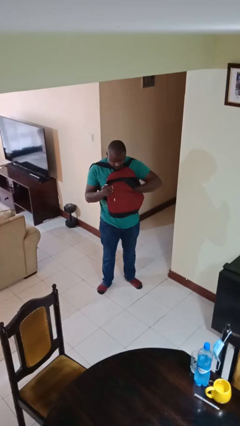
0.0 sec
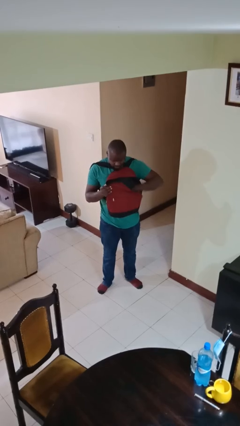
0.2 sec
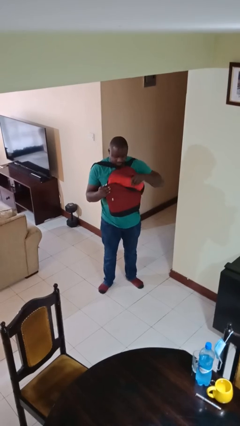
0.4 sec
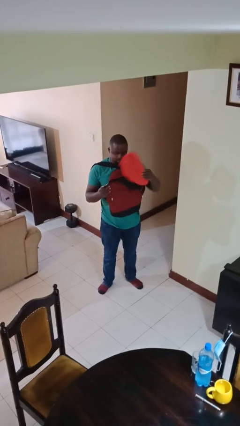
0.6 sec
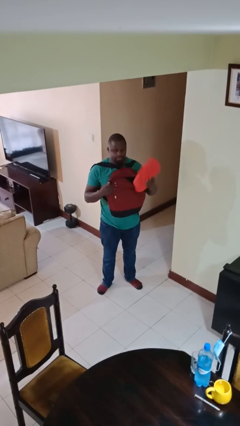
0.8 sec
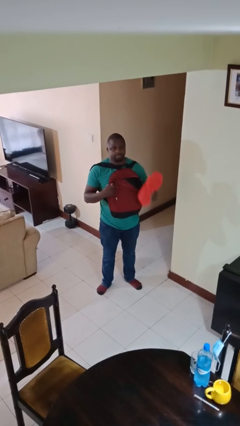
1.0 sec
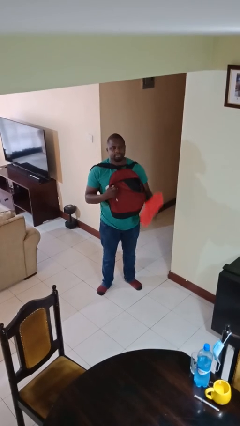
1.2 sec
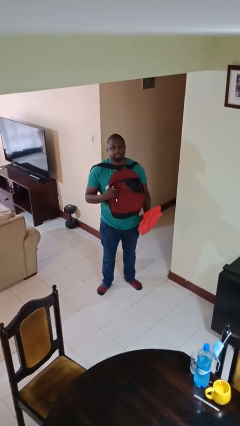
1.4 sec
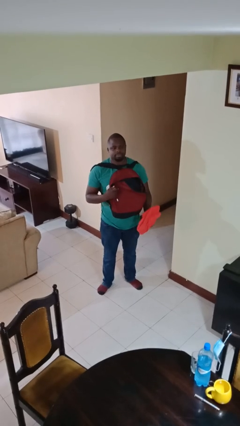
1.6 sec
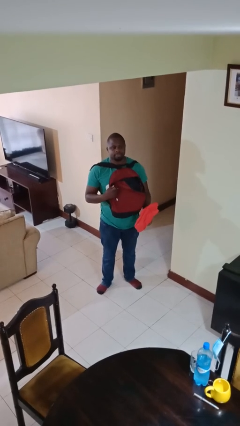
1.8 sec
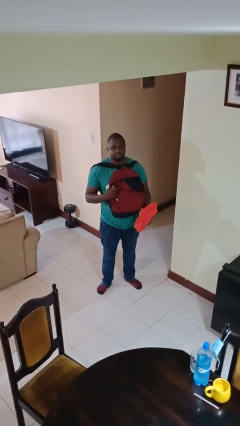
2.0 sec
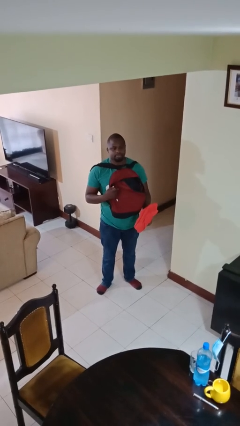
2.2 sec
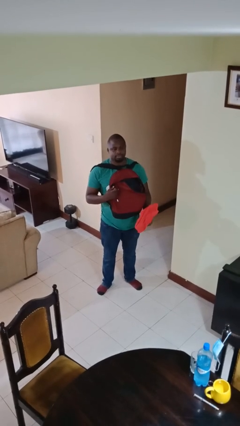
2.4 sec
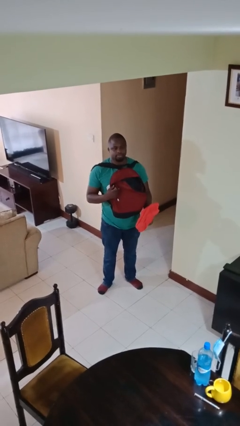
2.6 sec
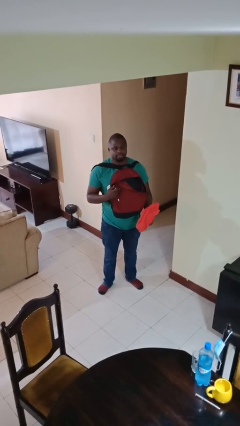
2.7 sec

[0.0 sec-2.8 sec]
person takes object from backpack

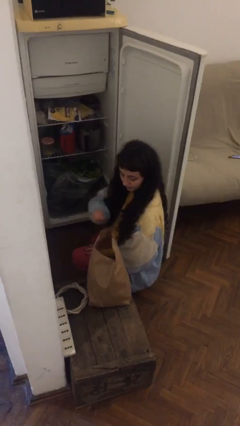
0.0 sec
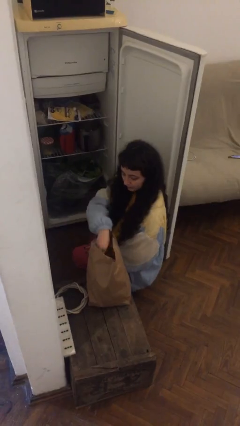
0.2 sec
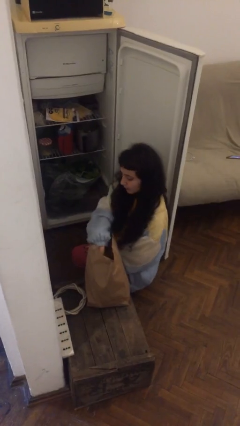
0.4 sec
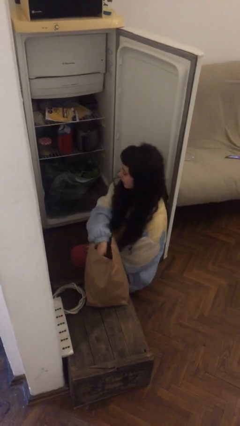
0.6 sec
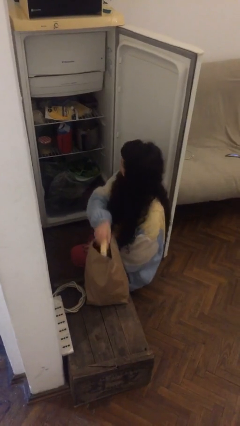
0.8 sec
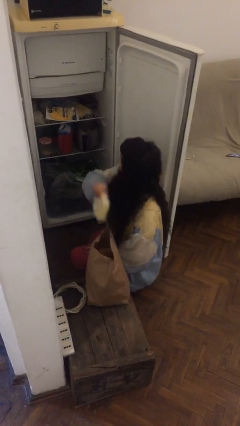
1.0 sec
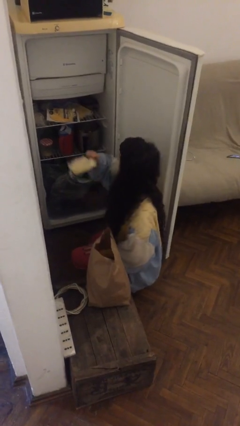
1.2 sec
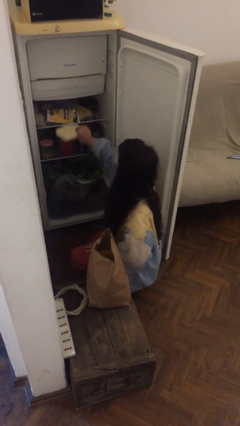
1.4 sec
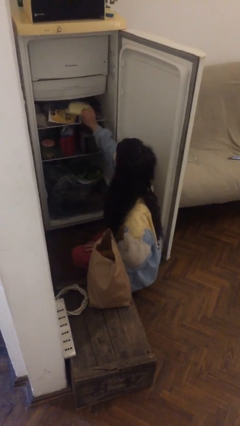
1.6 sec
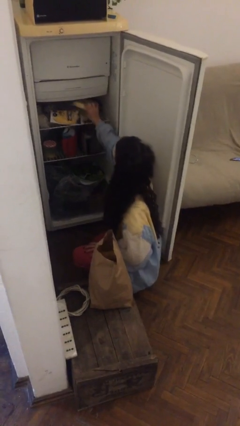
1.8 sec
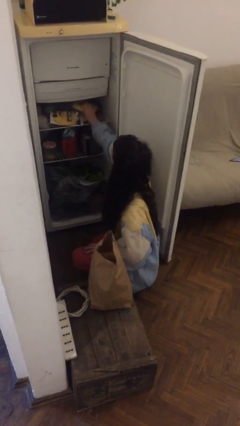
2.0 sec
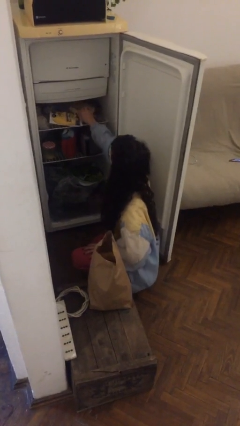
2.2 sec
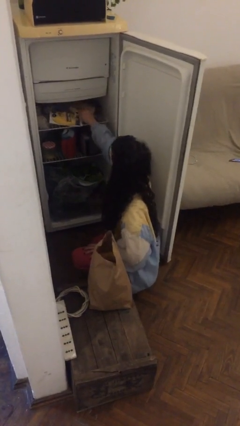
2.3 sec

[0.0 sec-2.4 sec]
person loads groceries into refrigerator

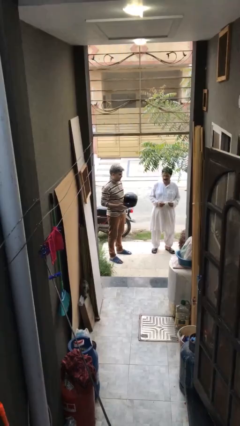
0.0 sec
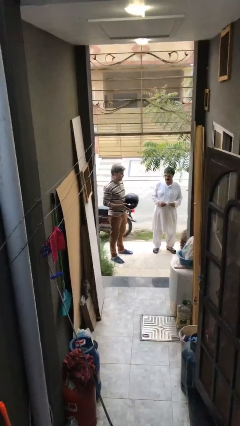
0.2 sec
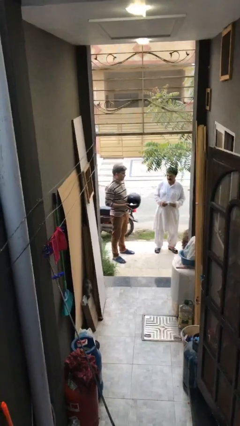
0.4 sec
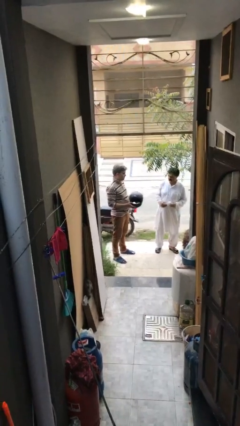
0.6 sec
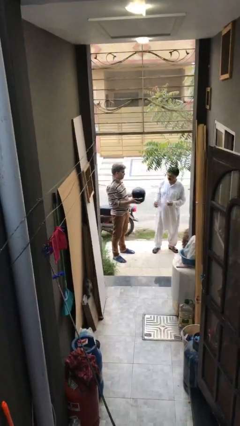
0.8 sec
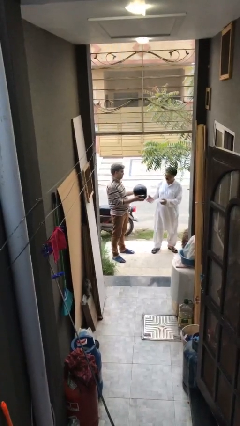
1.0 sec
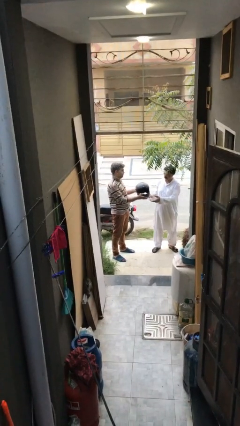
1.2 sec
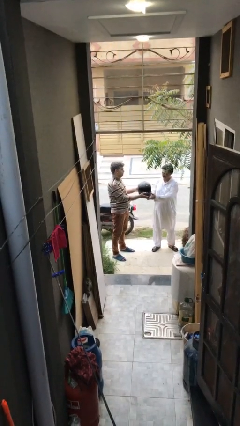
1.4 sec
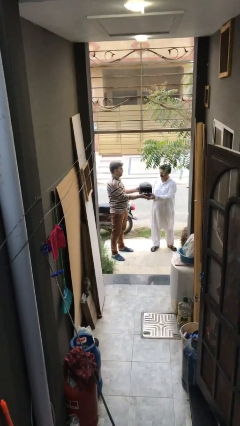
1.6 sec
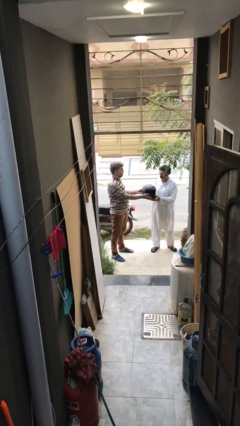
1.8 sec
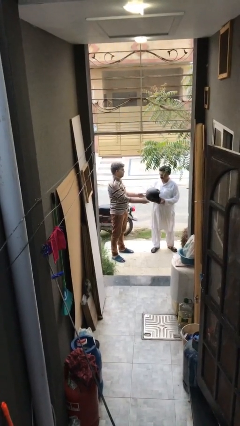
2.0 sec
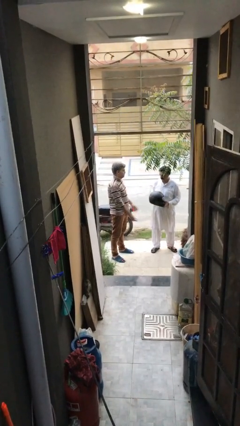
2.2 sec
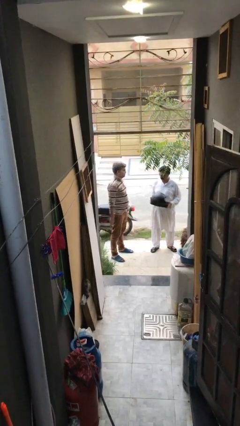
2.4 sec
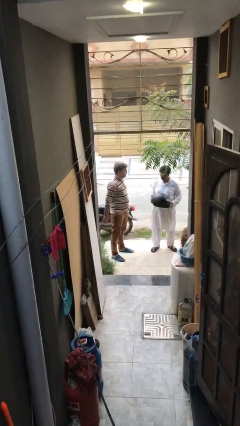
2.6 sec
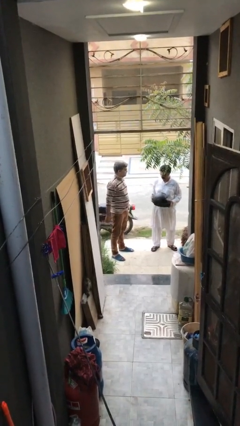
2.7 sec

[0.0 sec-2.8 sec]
person transfers object to person

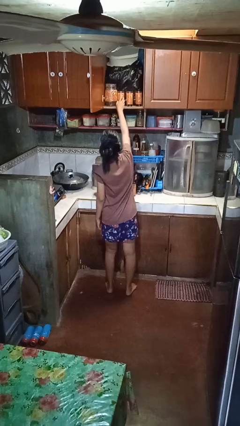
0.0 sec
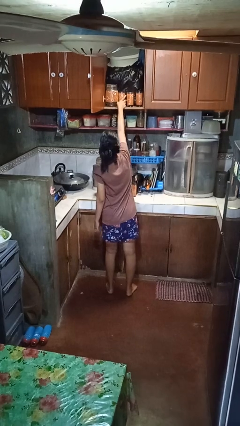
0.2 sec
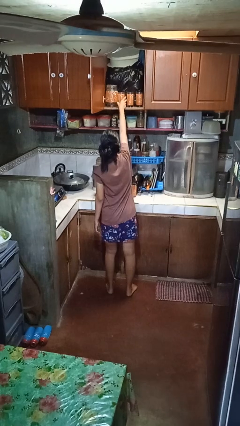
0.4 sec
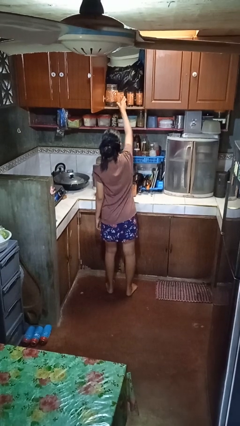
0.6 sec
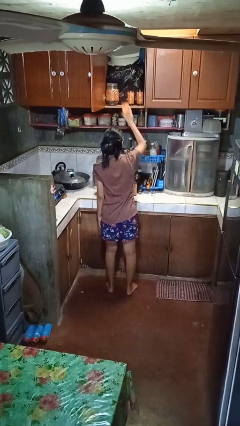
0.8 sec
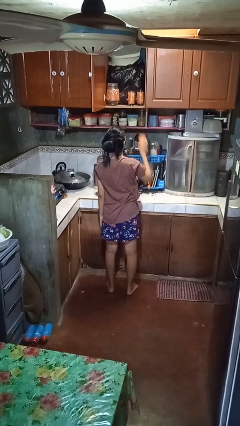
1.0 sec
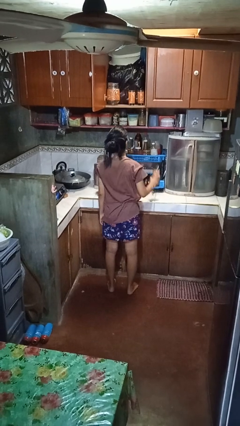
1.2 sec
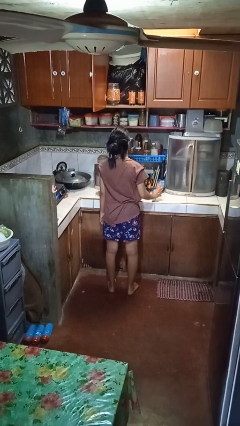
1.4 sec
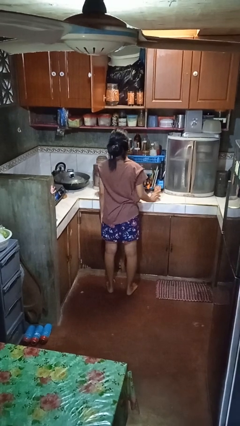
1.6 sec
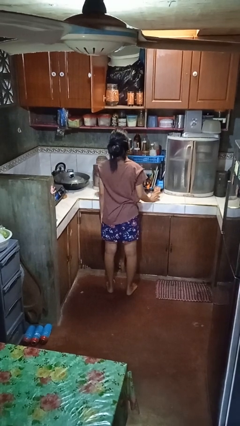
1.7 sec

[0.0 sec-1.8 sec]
person takes object from cabinet

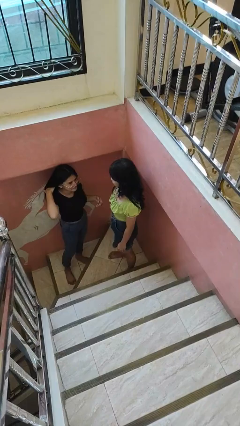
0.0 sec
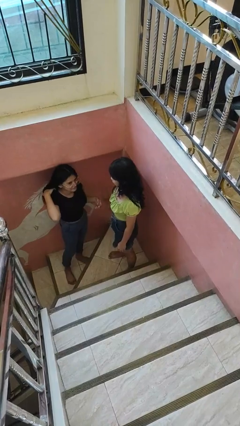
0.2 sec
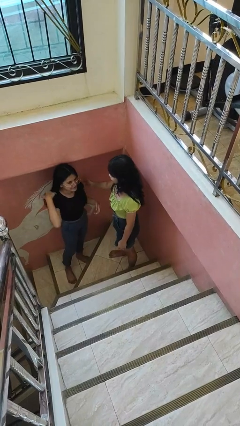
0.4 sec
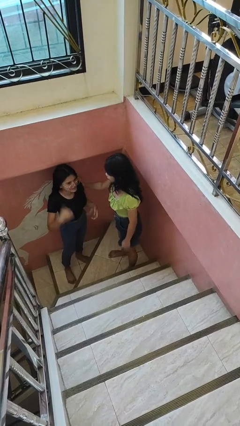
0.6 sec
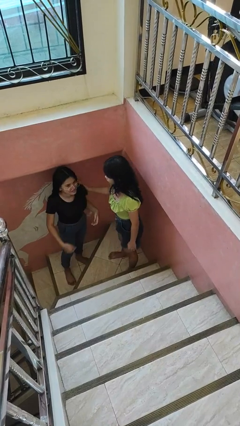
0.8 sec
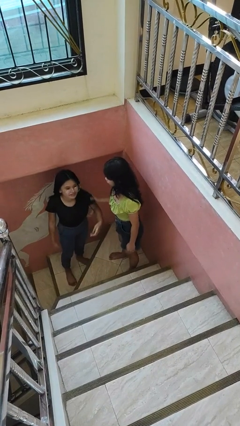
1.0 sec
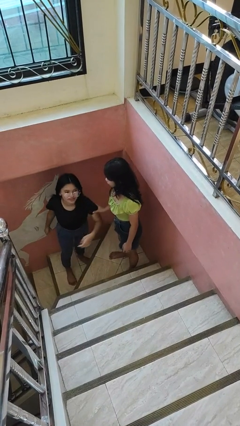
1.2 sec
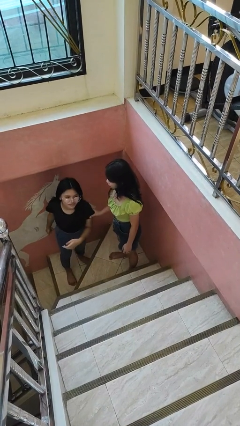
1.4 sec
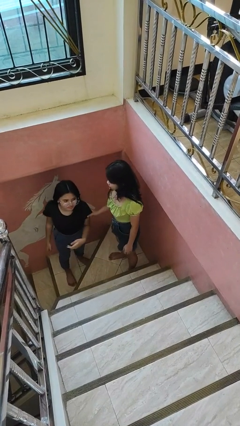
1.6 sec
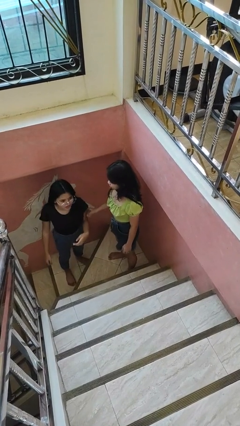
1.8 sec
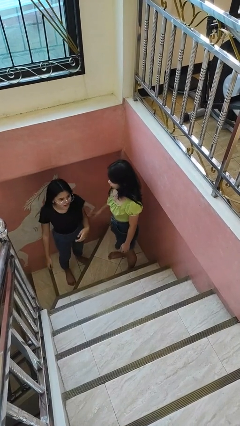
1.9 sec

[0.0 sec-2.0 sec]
person grabs person by bicep

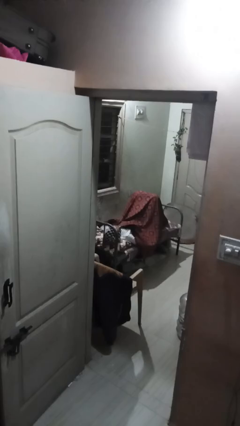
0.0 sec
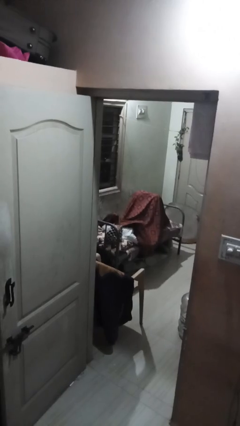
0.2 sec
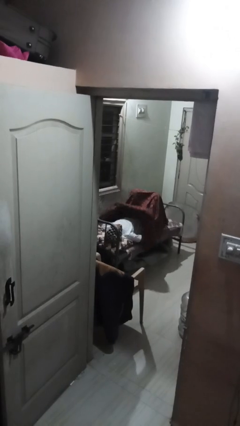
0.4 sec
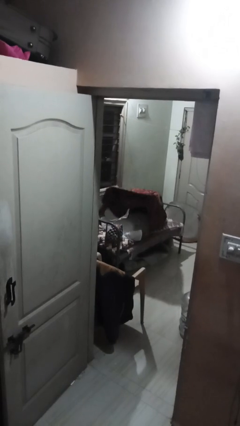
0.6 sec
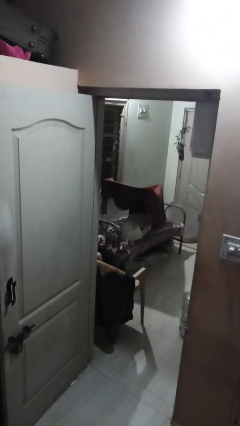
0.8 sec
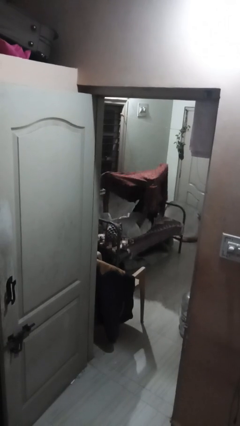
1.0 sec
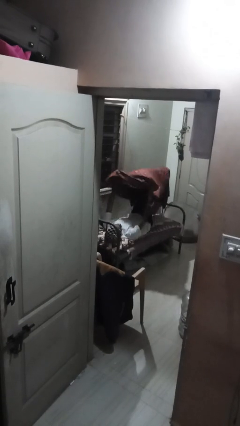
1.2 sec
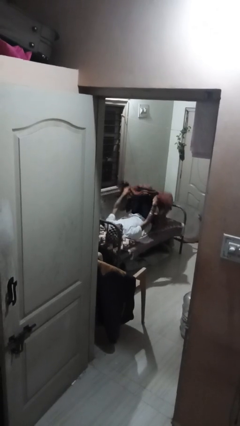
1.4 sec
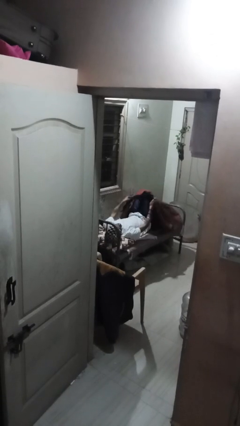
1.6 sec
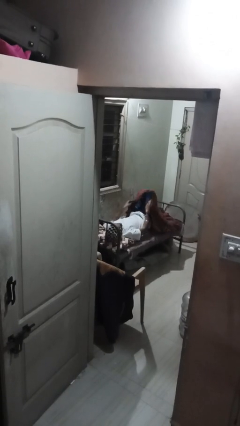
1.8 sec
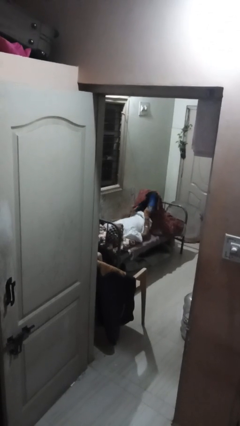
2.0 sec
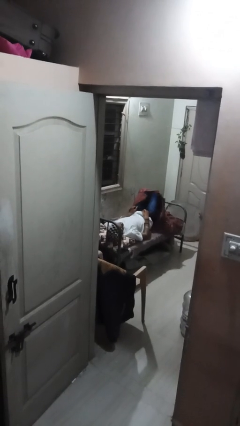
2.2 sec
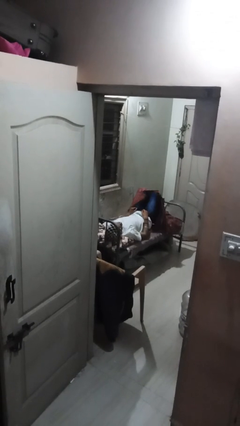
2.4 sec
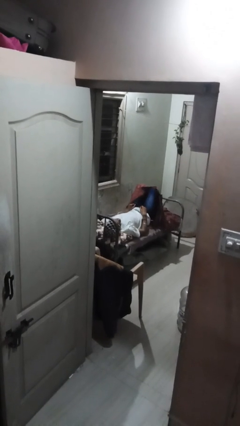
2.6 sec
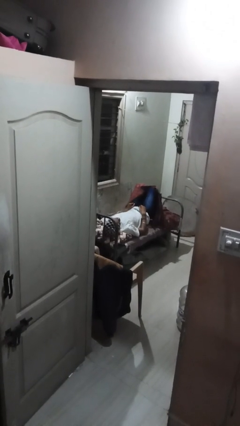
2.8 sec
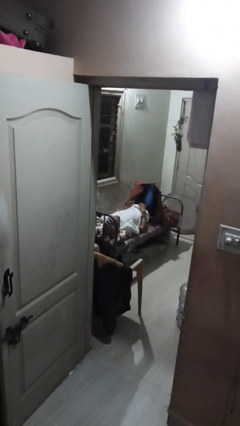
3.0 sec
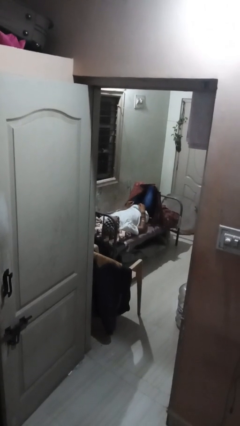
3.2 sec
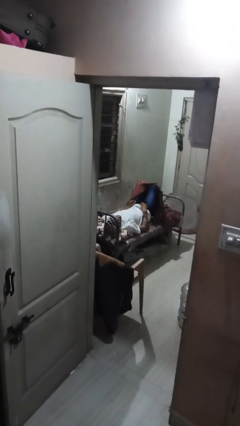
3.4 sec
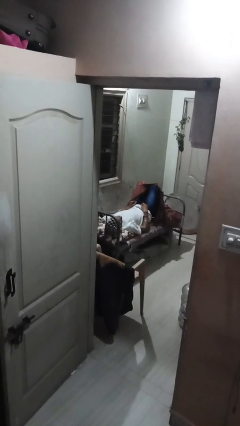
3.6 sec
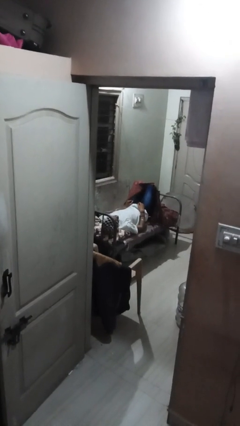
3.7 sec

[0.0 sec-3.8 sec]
person uncovers with bedsheets

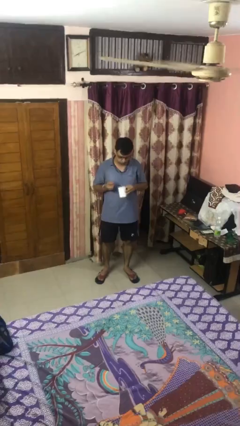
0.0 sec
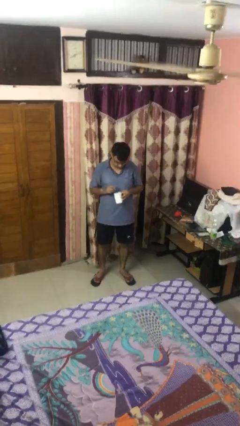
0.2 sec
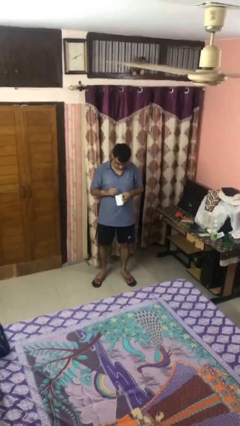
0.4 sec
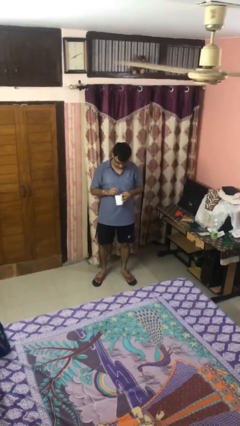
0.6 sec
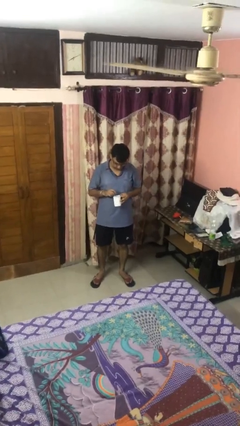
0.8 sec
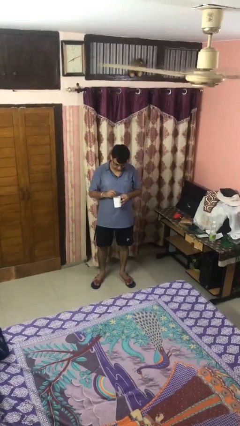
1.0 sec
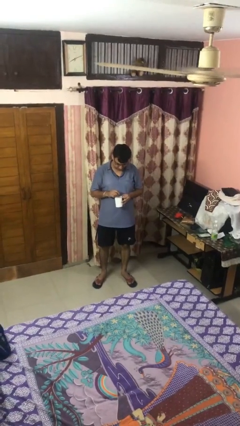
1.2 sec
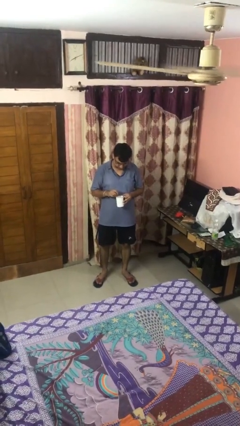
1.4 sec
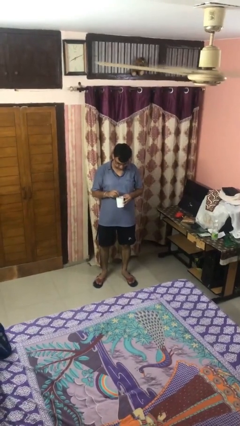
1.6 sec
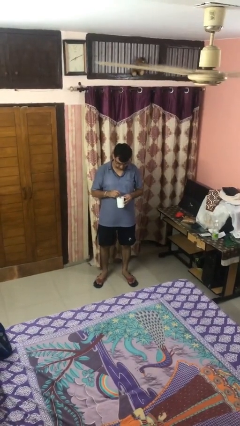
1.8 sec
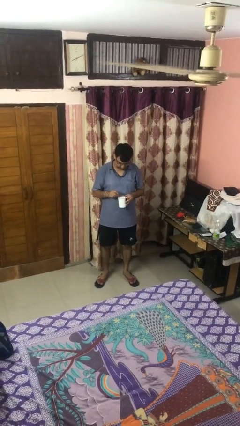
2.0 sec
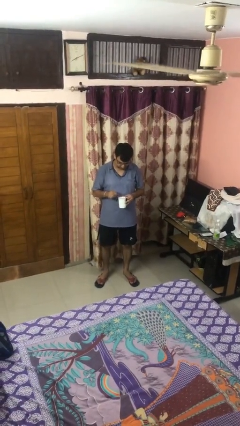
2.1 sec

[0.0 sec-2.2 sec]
person stirs mug
